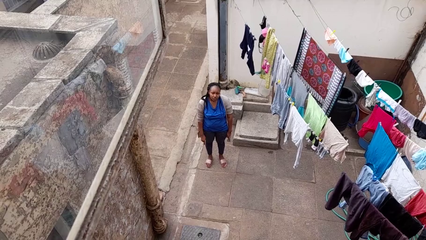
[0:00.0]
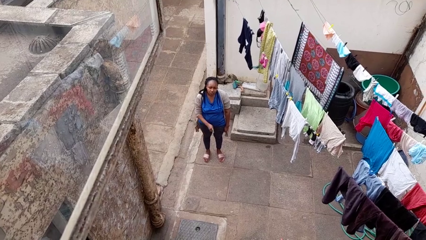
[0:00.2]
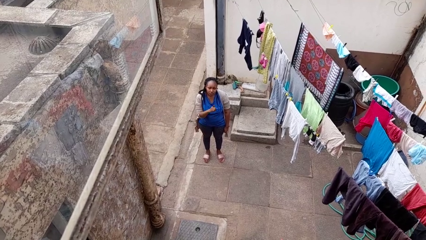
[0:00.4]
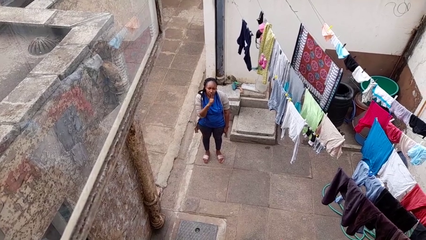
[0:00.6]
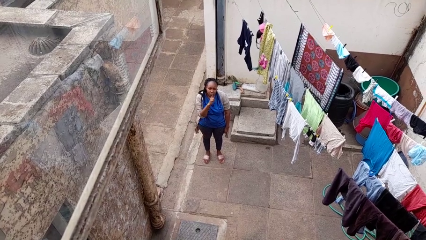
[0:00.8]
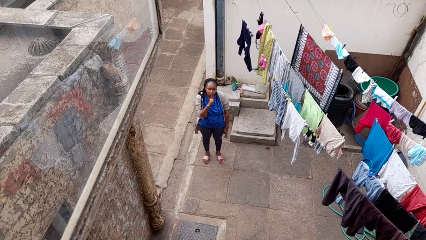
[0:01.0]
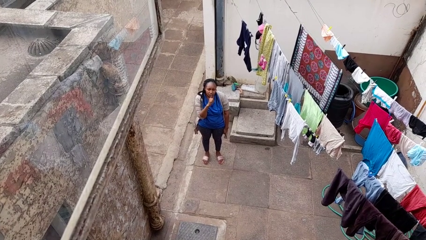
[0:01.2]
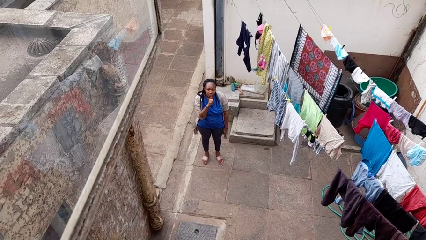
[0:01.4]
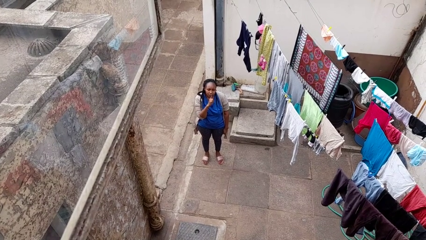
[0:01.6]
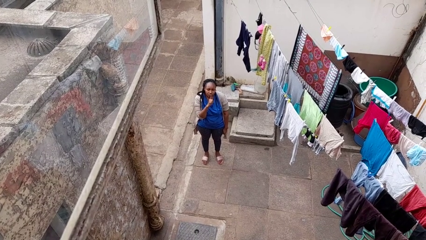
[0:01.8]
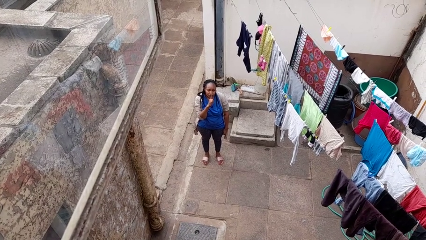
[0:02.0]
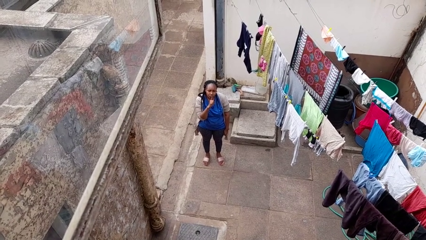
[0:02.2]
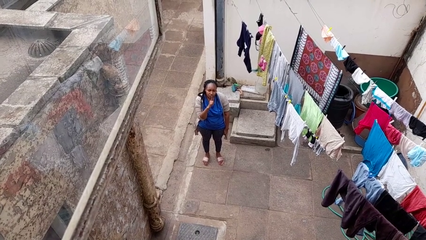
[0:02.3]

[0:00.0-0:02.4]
person gestures be quiet

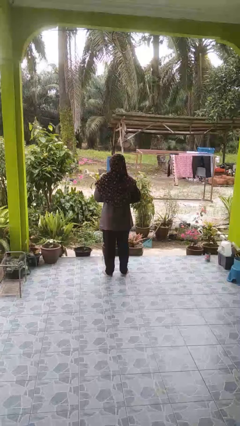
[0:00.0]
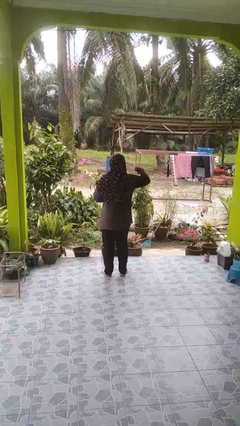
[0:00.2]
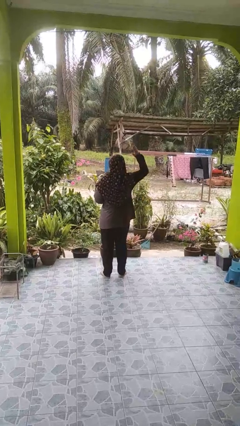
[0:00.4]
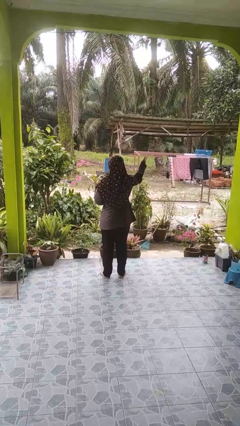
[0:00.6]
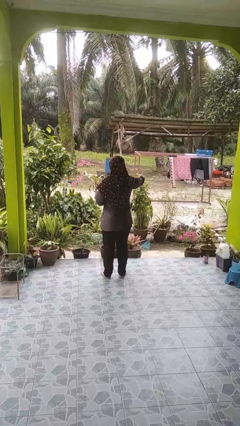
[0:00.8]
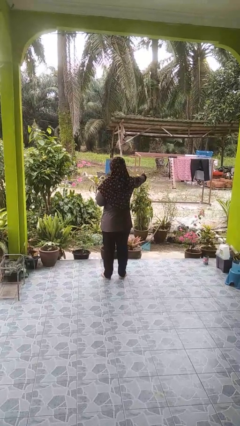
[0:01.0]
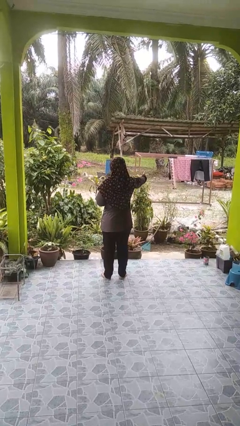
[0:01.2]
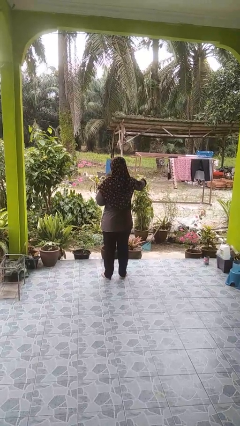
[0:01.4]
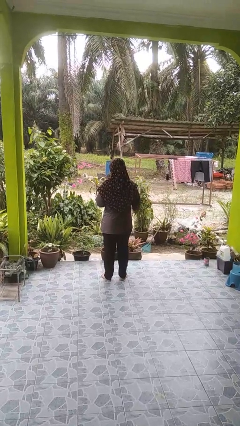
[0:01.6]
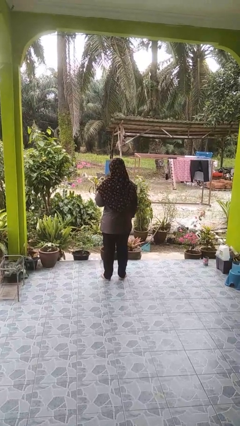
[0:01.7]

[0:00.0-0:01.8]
person karate chop

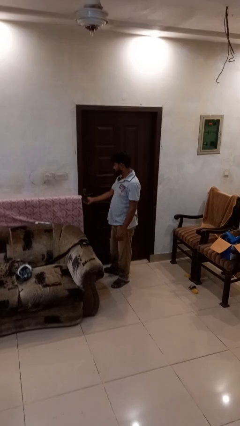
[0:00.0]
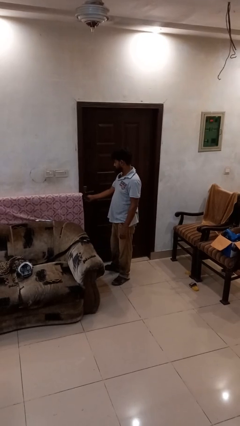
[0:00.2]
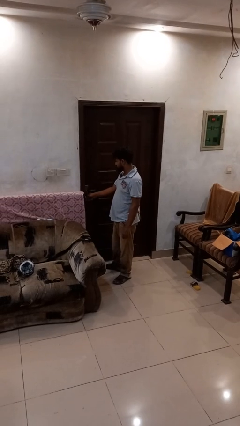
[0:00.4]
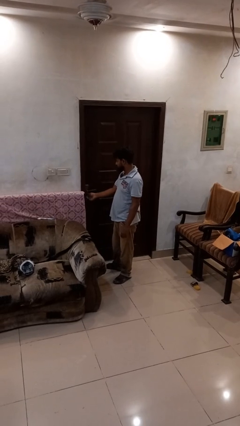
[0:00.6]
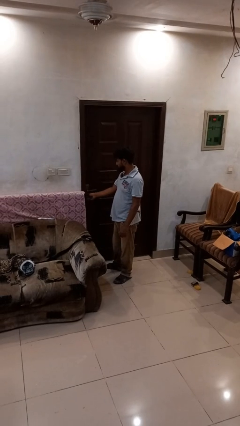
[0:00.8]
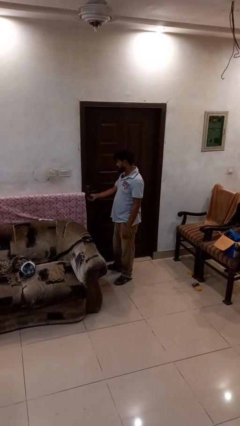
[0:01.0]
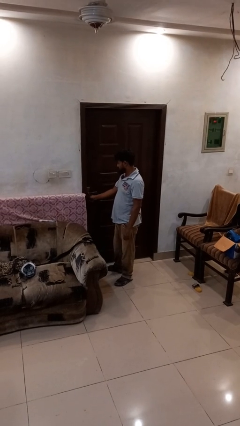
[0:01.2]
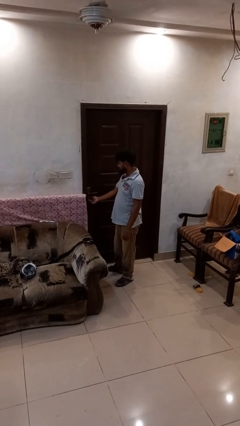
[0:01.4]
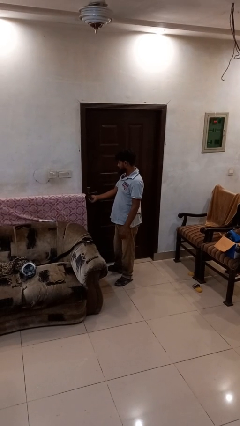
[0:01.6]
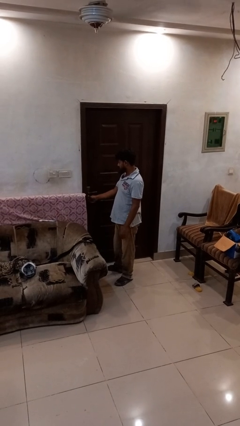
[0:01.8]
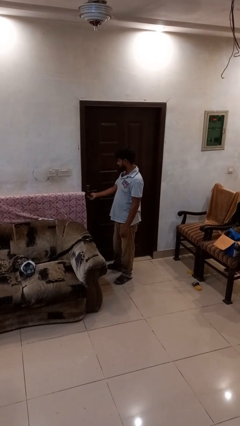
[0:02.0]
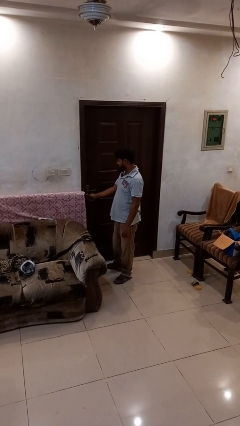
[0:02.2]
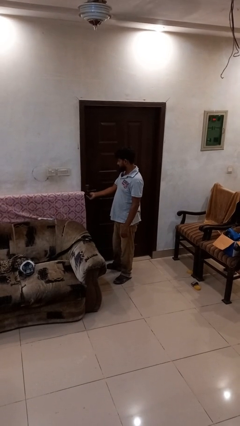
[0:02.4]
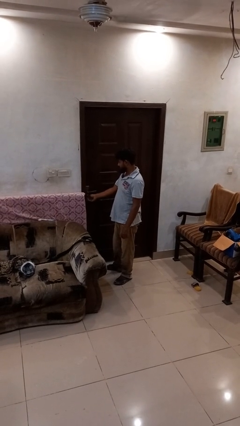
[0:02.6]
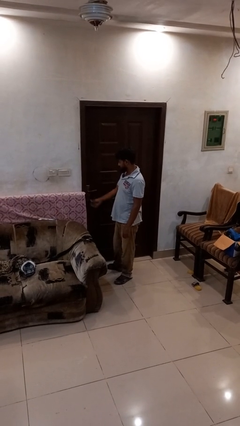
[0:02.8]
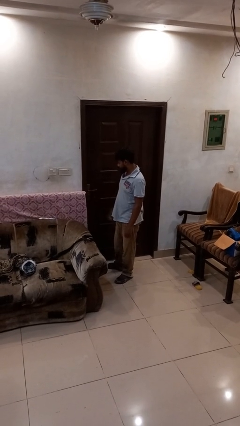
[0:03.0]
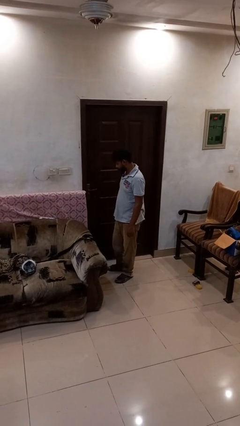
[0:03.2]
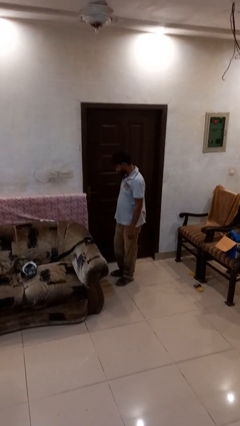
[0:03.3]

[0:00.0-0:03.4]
person locks door with keys

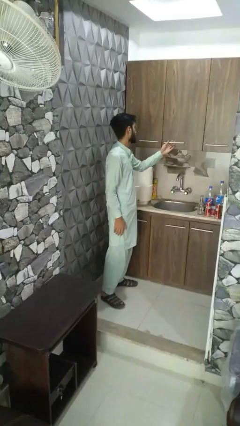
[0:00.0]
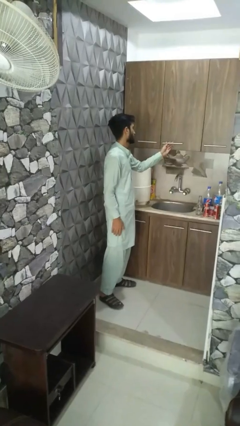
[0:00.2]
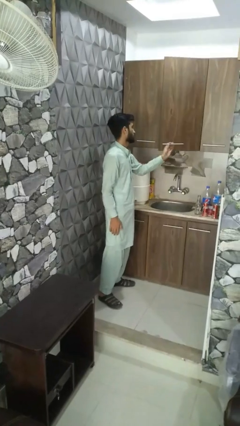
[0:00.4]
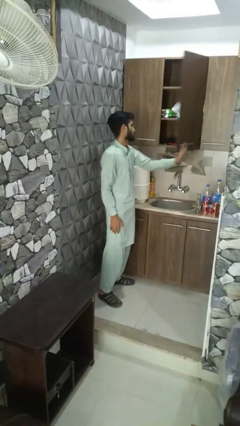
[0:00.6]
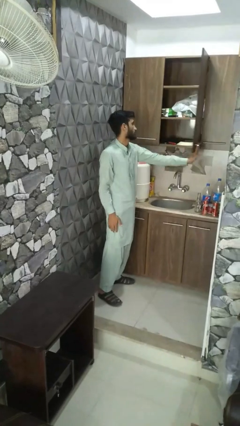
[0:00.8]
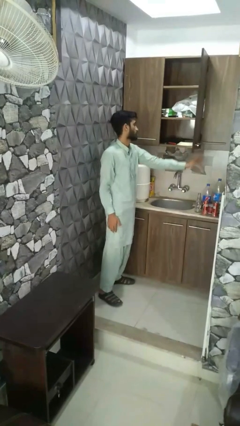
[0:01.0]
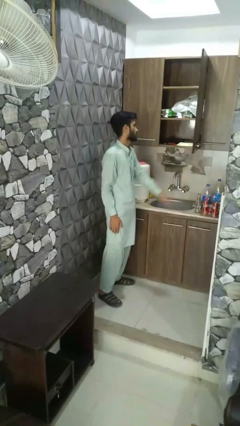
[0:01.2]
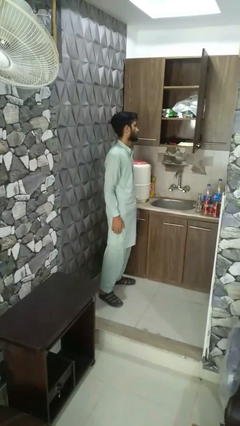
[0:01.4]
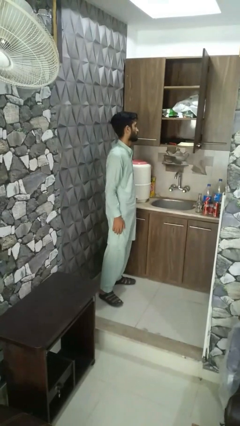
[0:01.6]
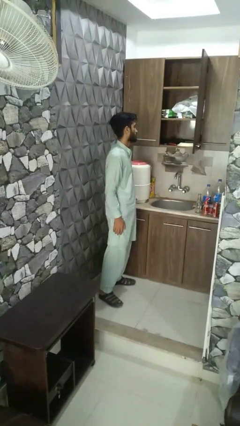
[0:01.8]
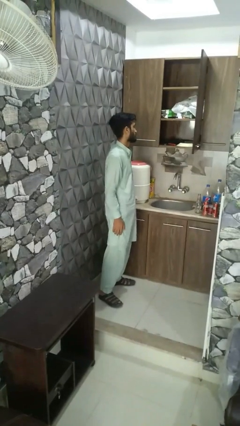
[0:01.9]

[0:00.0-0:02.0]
person opens cabinet

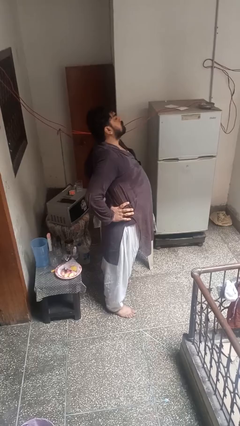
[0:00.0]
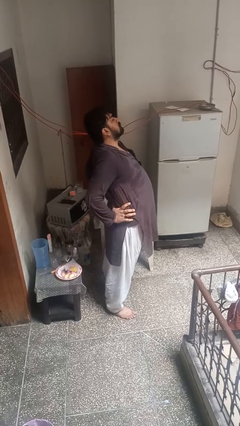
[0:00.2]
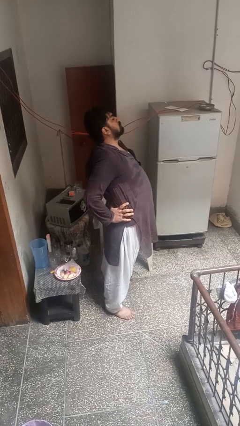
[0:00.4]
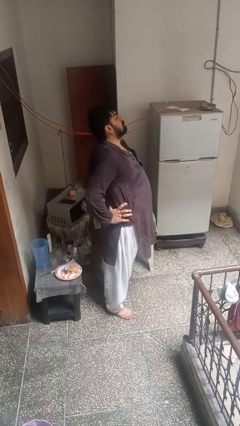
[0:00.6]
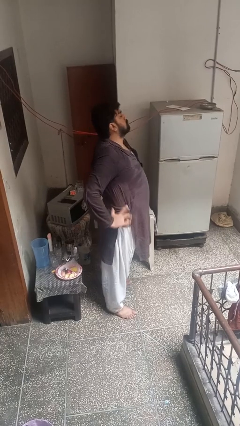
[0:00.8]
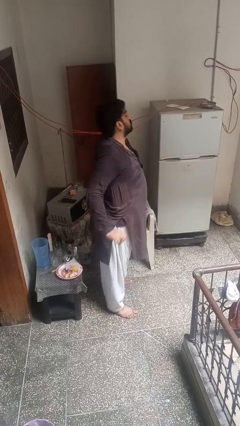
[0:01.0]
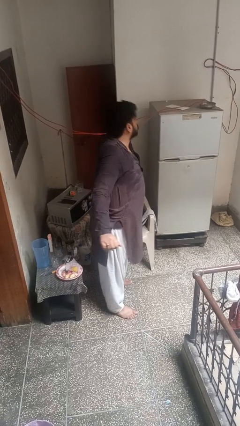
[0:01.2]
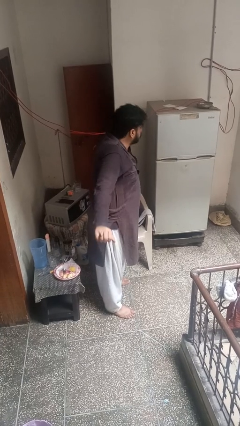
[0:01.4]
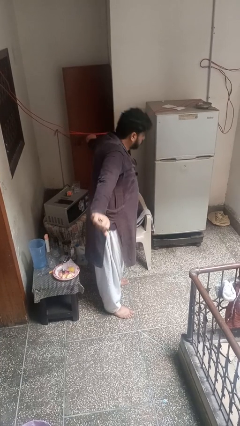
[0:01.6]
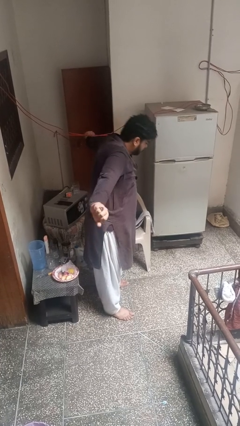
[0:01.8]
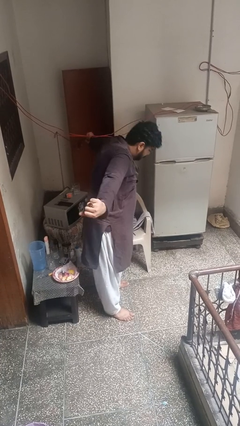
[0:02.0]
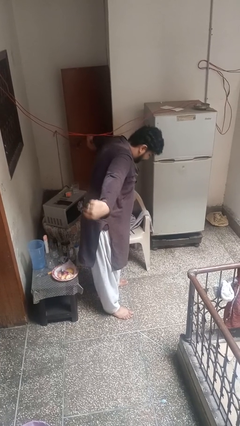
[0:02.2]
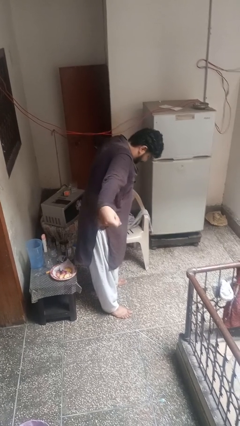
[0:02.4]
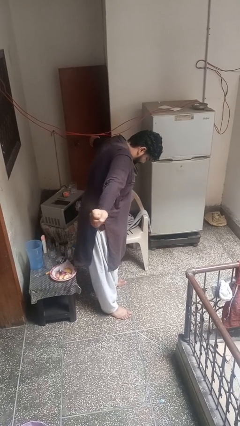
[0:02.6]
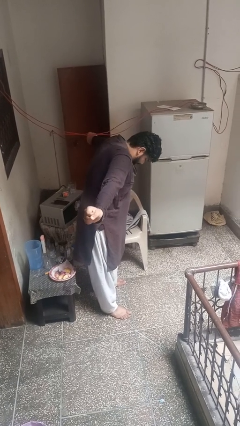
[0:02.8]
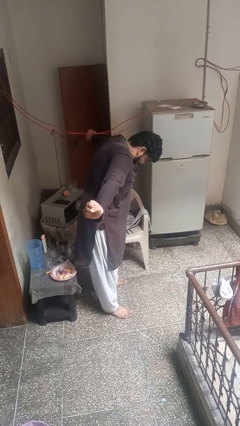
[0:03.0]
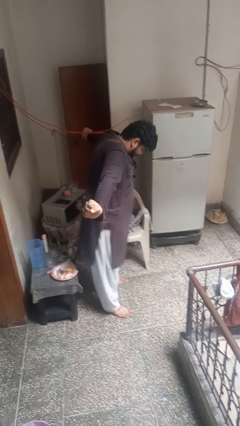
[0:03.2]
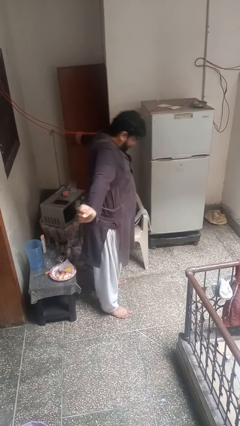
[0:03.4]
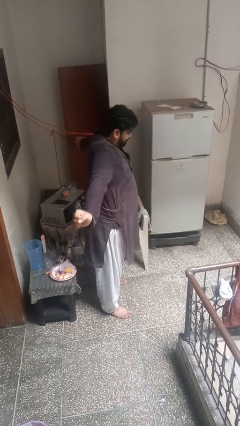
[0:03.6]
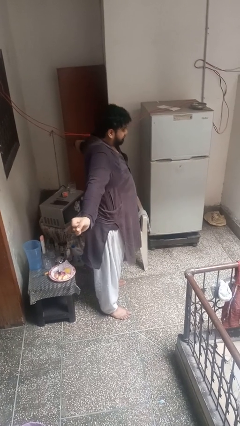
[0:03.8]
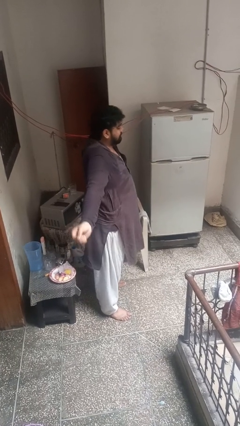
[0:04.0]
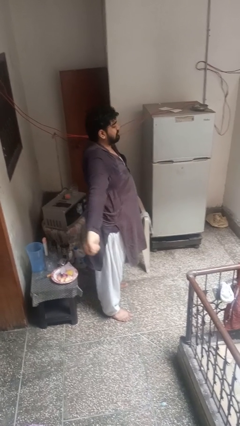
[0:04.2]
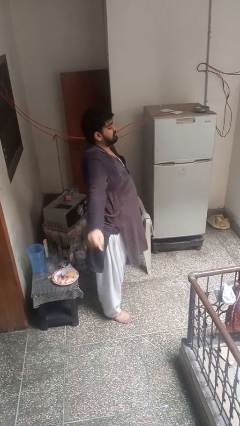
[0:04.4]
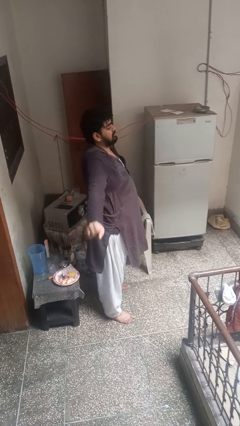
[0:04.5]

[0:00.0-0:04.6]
person stretches arms to side

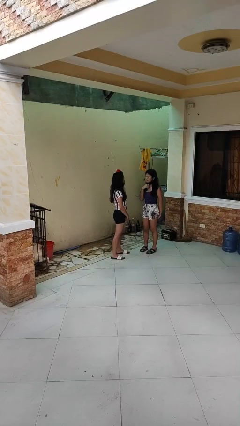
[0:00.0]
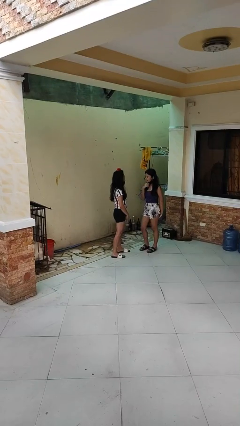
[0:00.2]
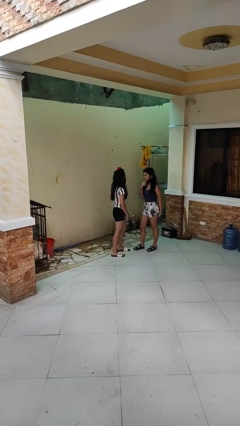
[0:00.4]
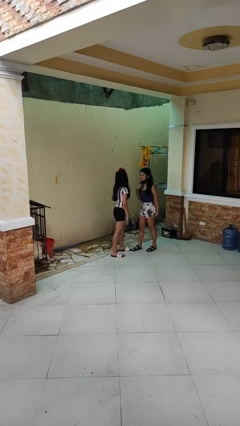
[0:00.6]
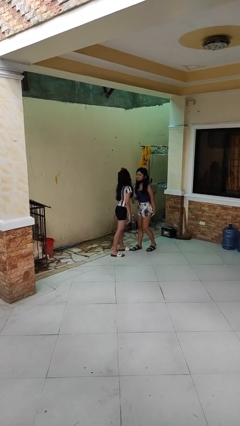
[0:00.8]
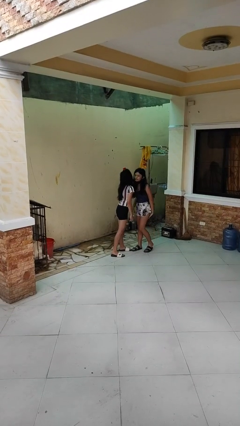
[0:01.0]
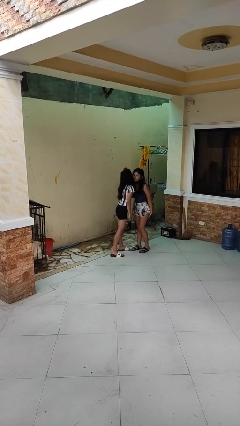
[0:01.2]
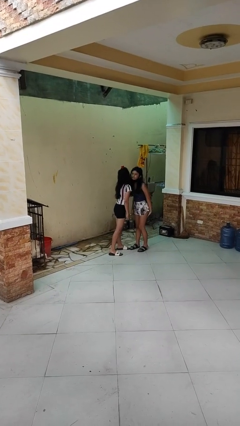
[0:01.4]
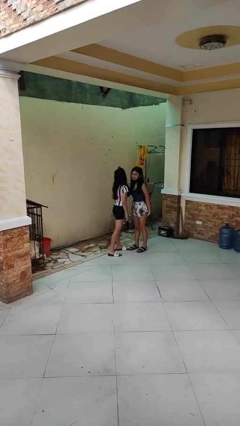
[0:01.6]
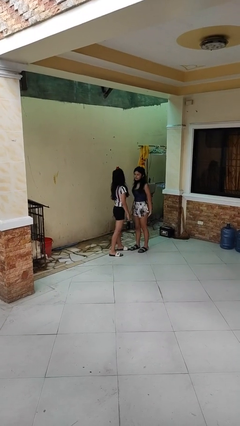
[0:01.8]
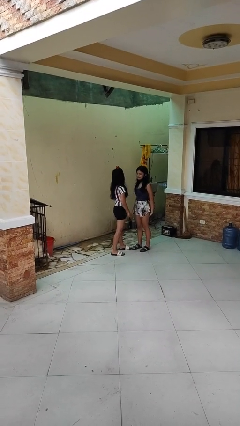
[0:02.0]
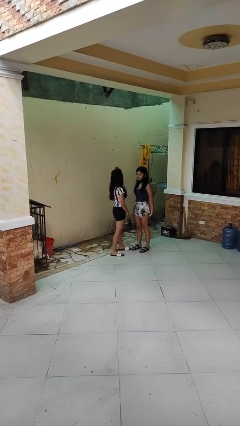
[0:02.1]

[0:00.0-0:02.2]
person kisses cheek of person
